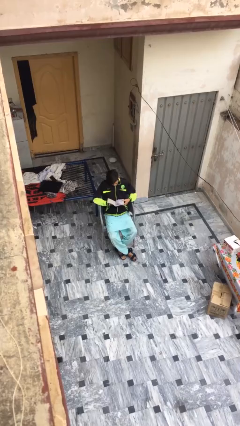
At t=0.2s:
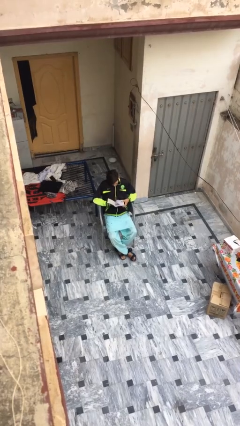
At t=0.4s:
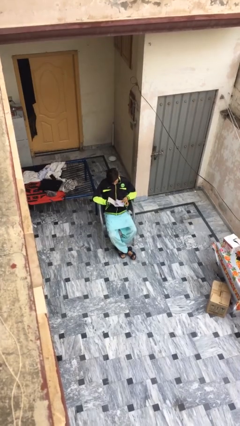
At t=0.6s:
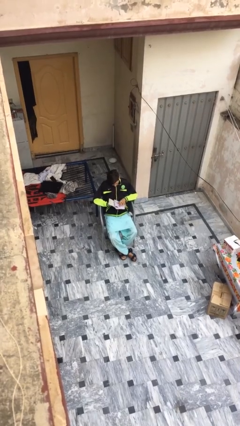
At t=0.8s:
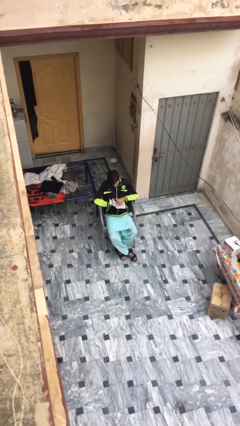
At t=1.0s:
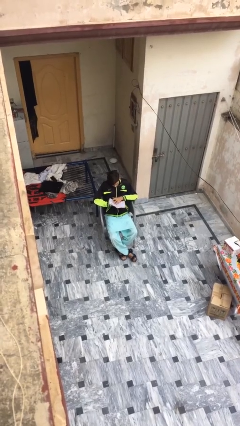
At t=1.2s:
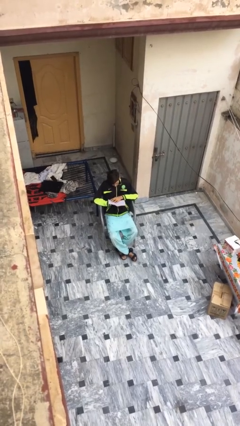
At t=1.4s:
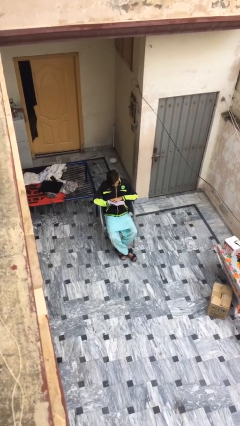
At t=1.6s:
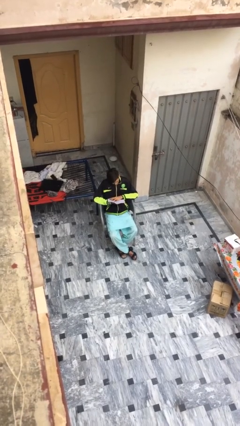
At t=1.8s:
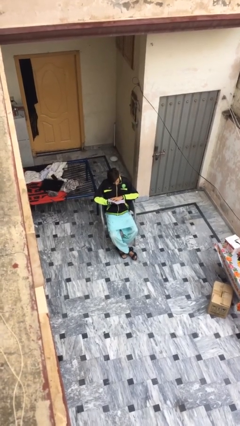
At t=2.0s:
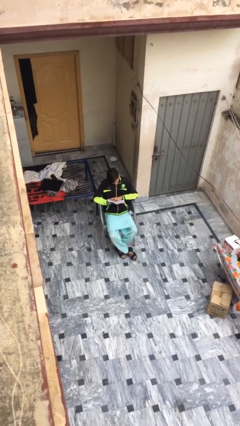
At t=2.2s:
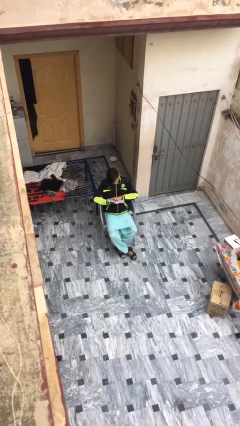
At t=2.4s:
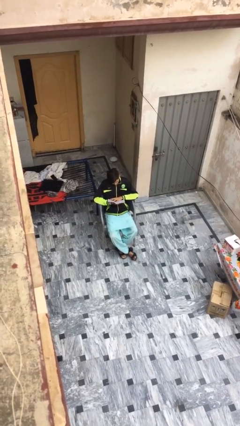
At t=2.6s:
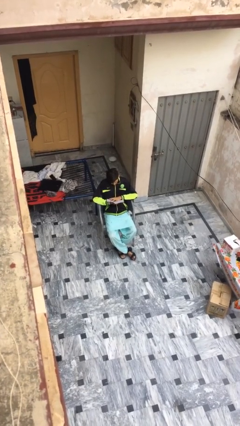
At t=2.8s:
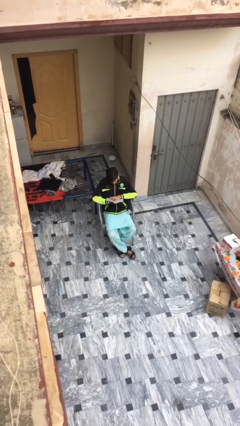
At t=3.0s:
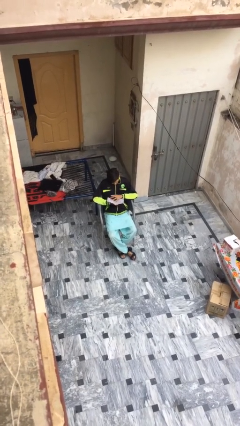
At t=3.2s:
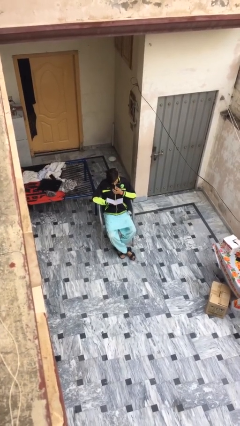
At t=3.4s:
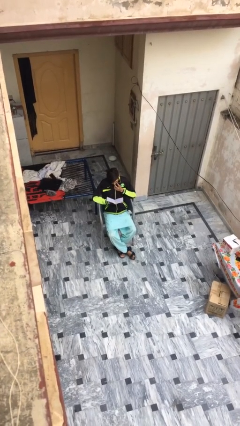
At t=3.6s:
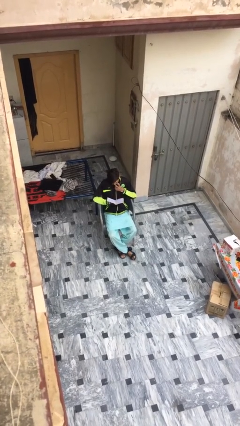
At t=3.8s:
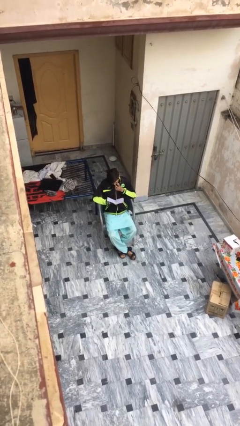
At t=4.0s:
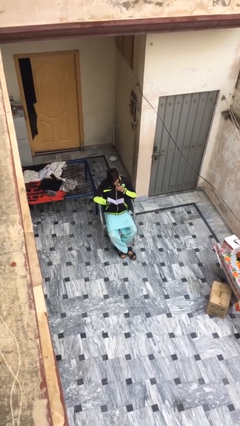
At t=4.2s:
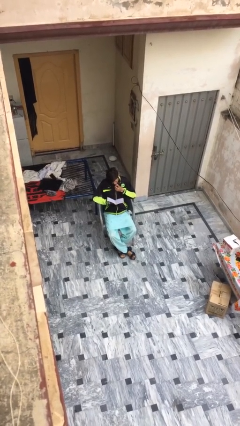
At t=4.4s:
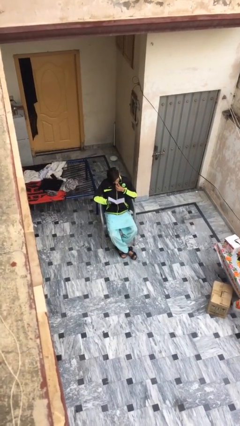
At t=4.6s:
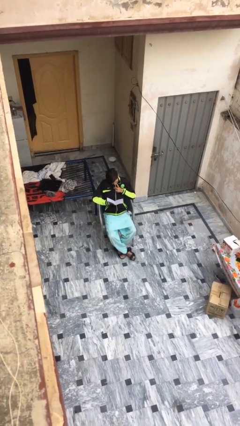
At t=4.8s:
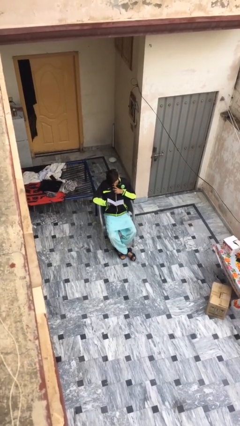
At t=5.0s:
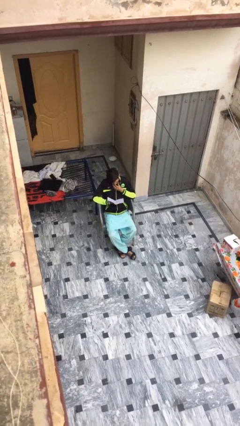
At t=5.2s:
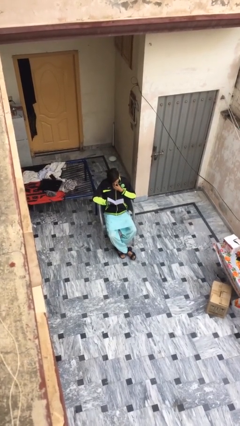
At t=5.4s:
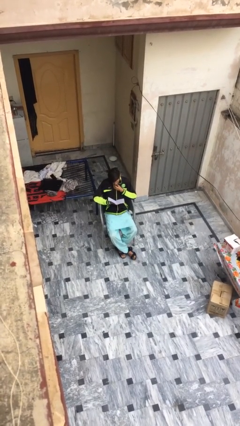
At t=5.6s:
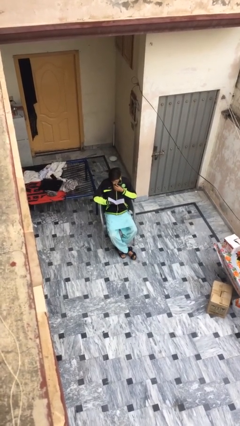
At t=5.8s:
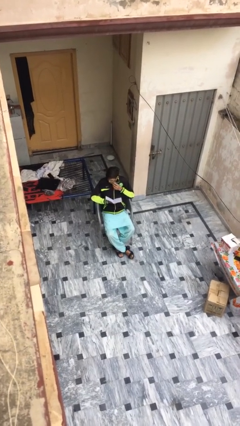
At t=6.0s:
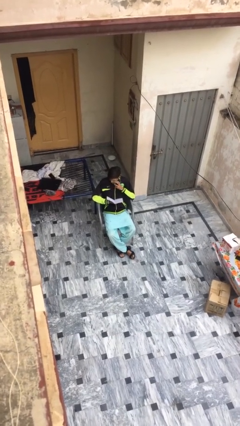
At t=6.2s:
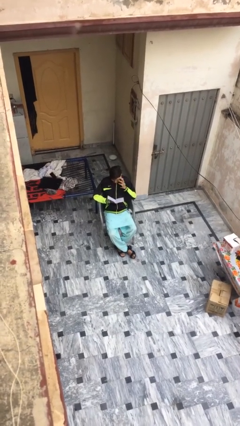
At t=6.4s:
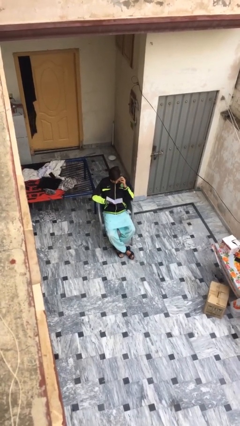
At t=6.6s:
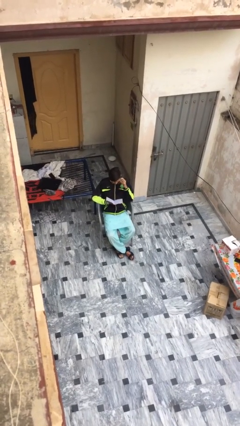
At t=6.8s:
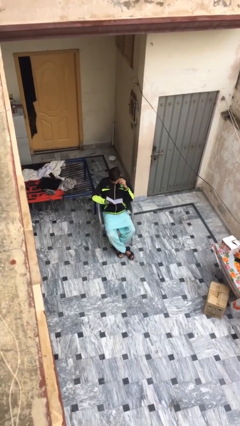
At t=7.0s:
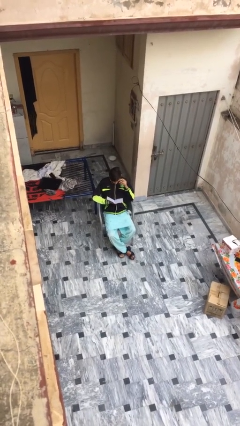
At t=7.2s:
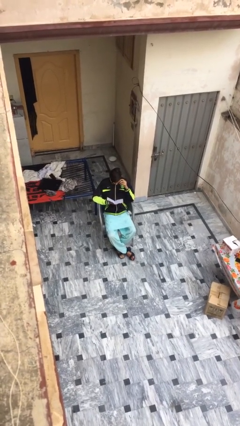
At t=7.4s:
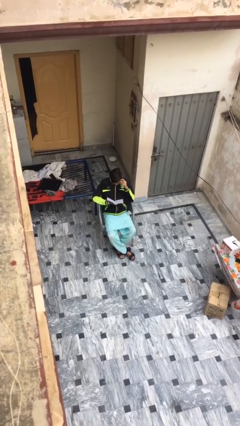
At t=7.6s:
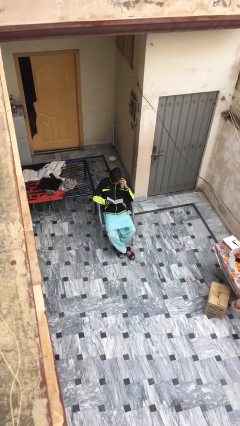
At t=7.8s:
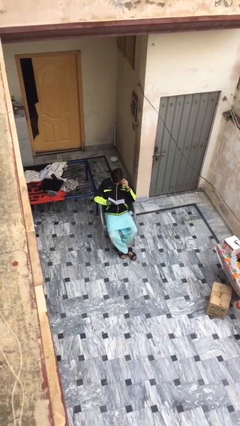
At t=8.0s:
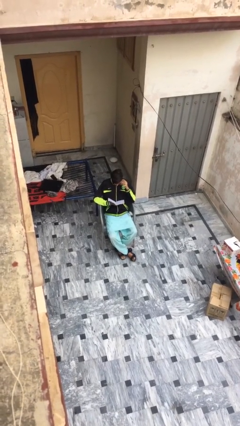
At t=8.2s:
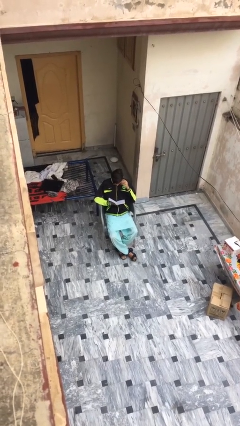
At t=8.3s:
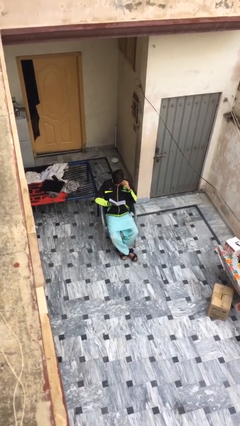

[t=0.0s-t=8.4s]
person reads document

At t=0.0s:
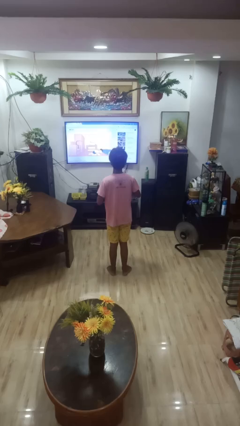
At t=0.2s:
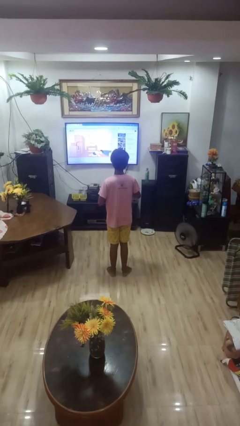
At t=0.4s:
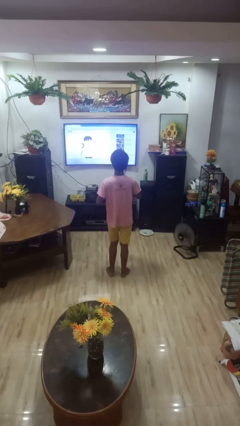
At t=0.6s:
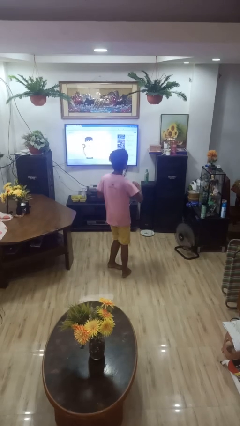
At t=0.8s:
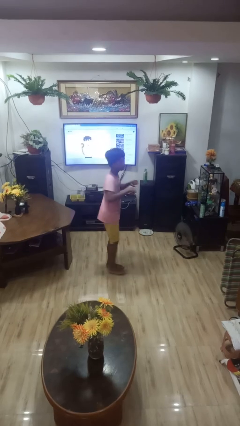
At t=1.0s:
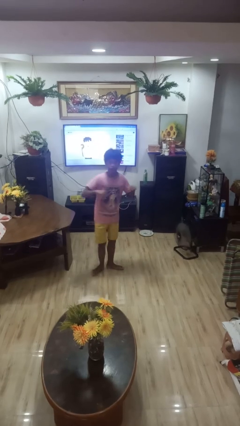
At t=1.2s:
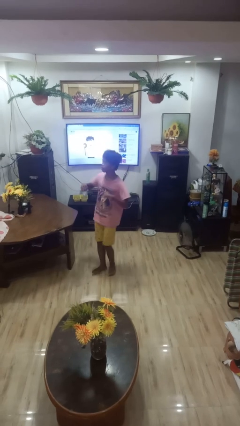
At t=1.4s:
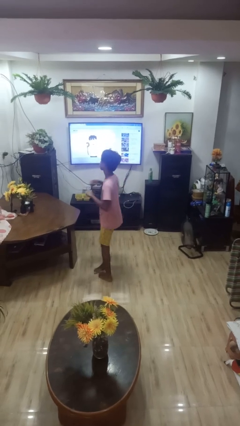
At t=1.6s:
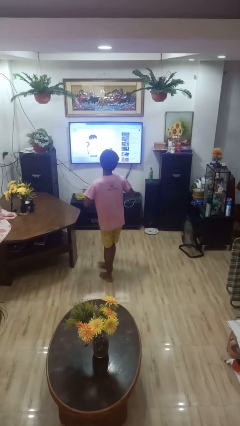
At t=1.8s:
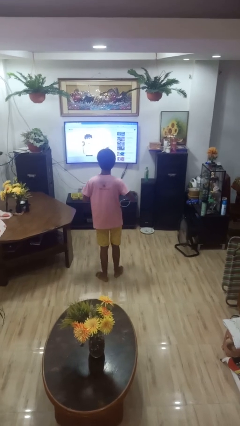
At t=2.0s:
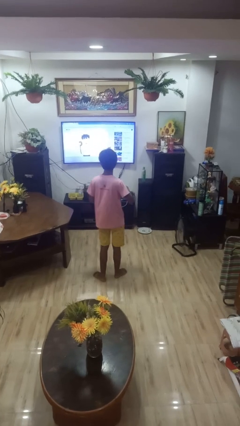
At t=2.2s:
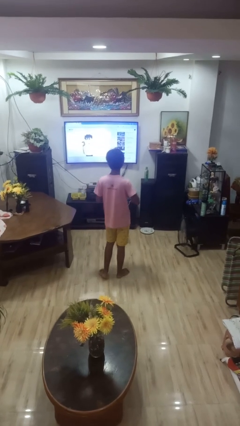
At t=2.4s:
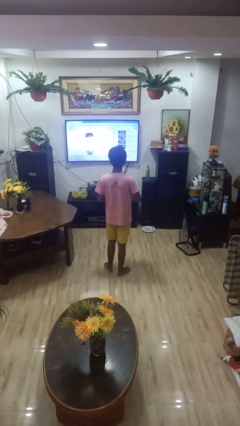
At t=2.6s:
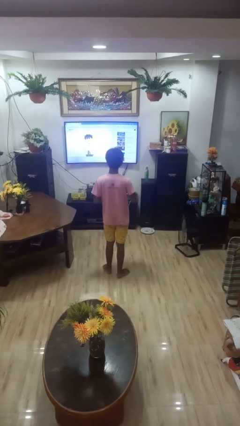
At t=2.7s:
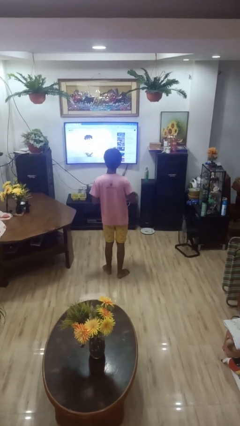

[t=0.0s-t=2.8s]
person twirls

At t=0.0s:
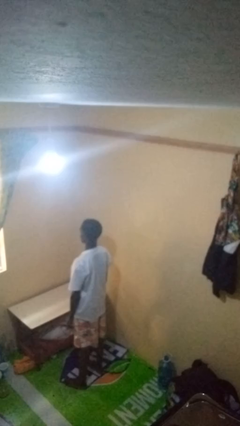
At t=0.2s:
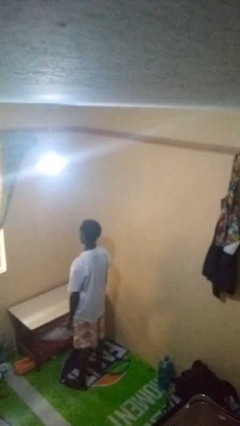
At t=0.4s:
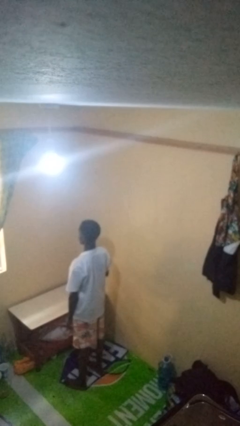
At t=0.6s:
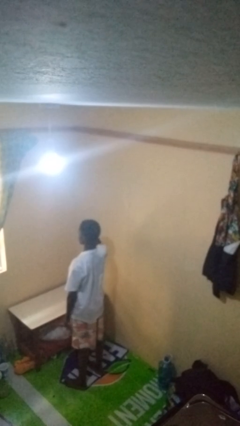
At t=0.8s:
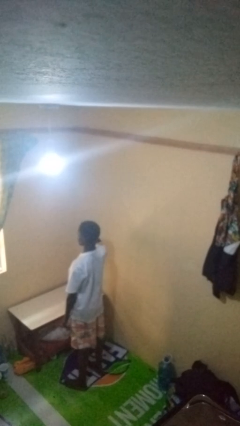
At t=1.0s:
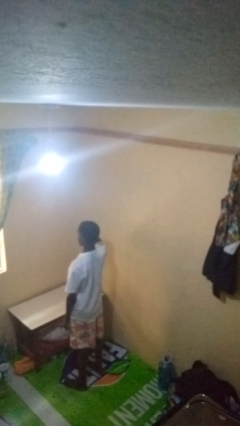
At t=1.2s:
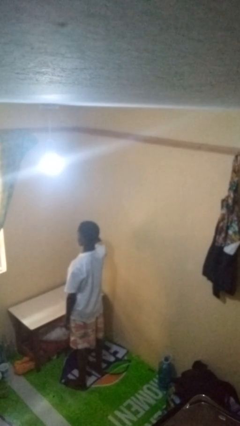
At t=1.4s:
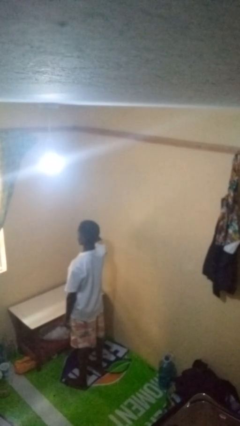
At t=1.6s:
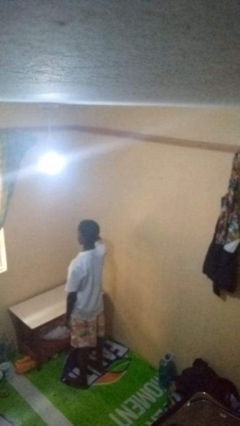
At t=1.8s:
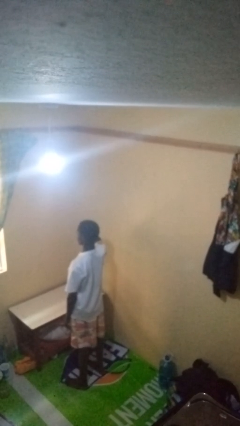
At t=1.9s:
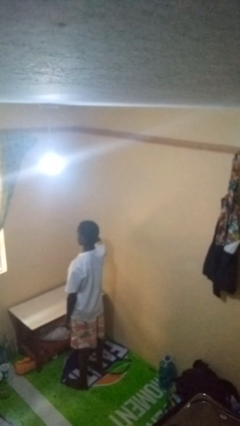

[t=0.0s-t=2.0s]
person salutes

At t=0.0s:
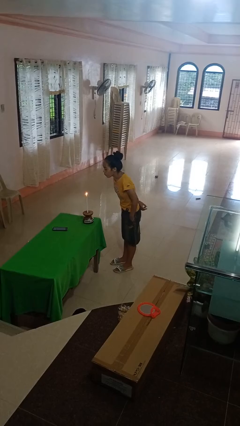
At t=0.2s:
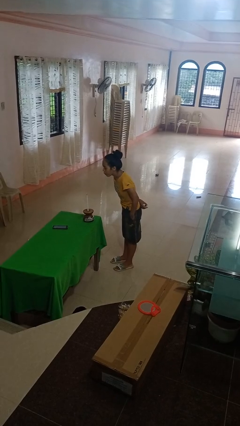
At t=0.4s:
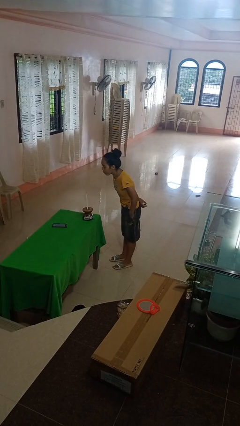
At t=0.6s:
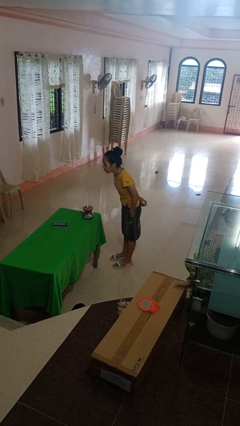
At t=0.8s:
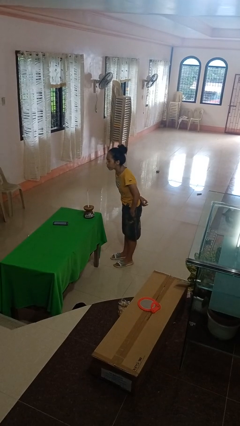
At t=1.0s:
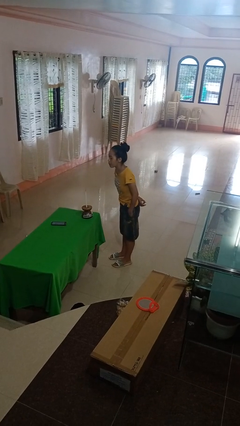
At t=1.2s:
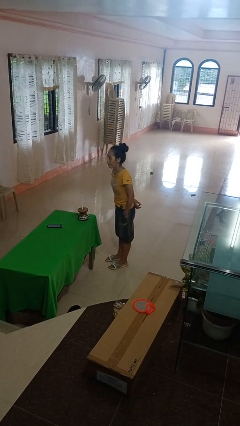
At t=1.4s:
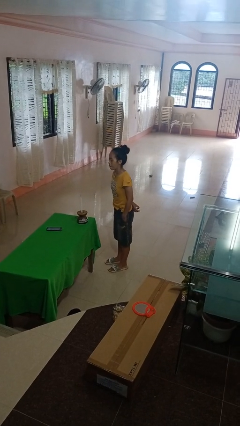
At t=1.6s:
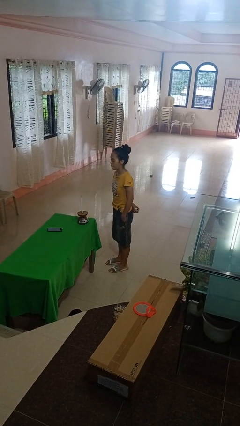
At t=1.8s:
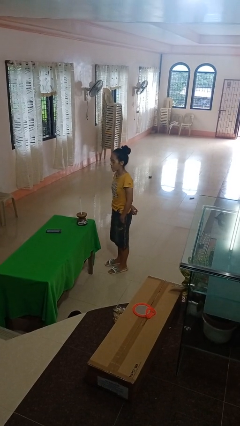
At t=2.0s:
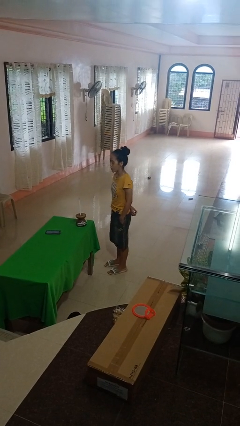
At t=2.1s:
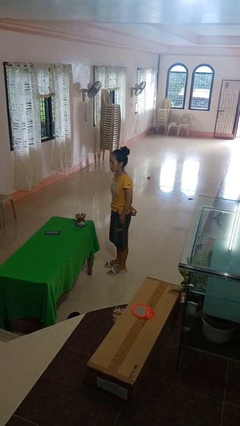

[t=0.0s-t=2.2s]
person extinguishes candle

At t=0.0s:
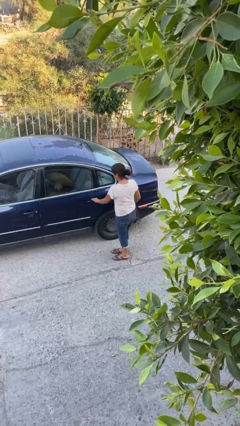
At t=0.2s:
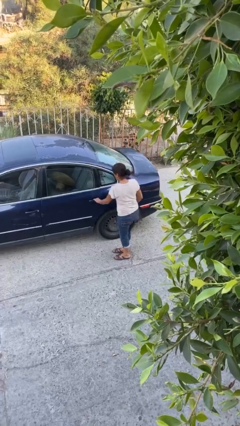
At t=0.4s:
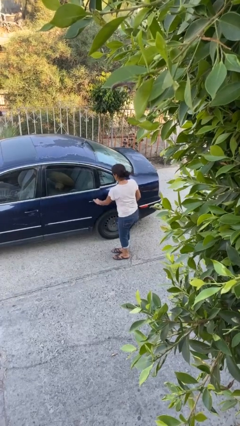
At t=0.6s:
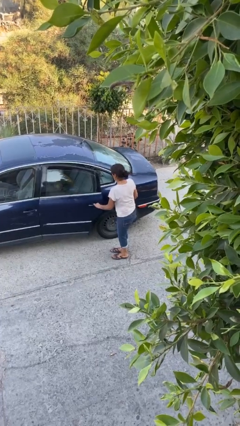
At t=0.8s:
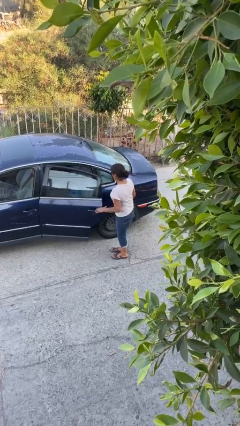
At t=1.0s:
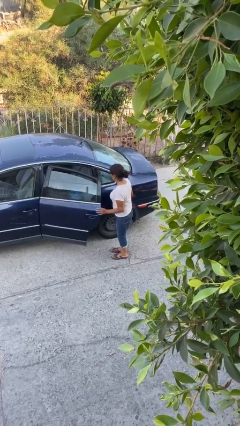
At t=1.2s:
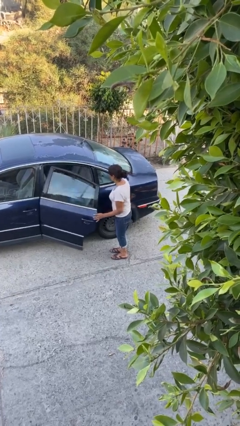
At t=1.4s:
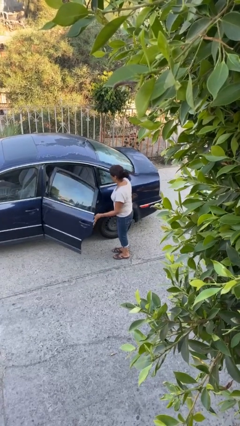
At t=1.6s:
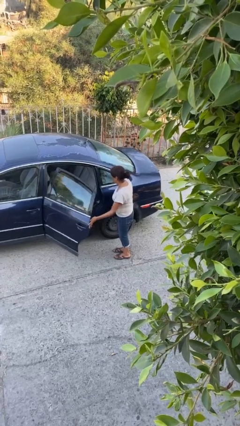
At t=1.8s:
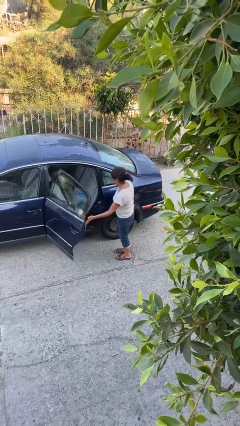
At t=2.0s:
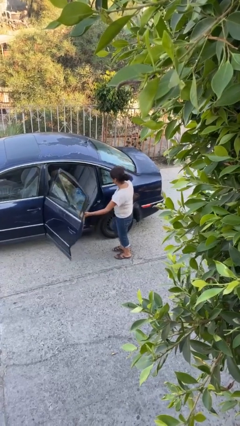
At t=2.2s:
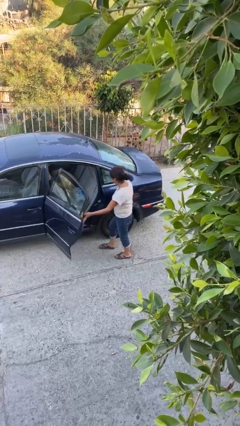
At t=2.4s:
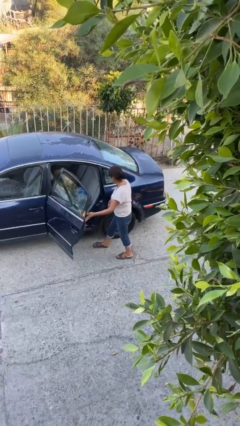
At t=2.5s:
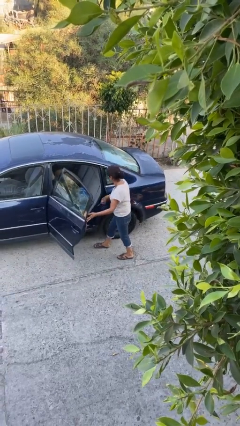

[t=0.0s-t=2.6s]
person opens car door
